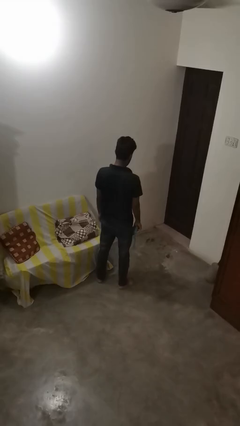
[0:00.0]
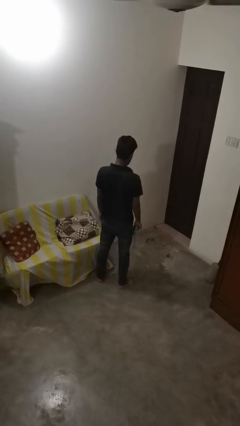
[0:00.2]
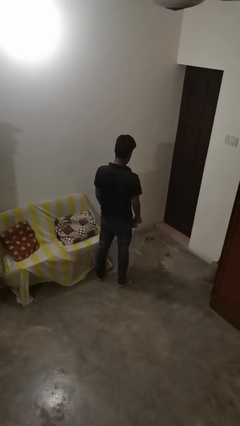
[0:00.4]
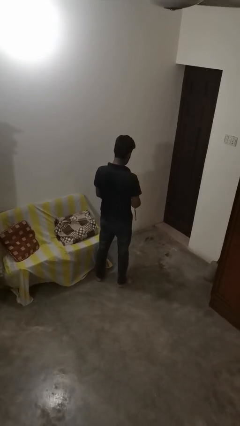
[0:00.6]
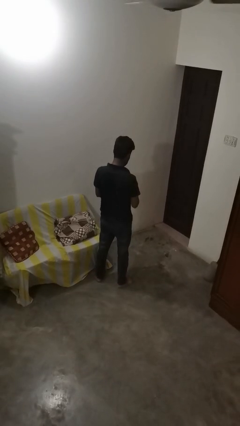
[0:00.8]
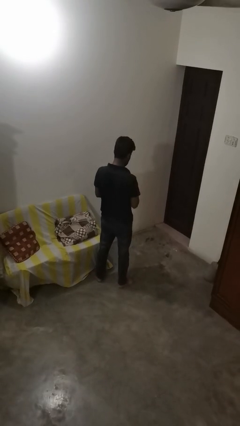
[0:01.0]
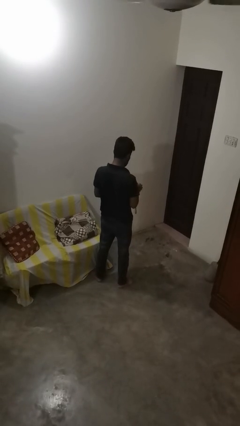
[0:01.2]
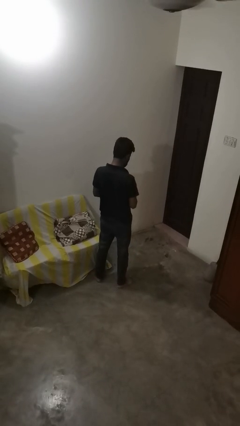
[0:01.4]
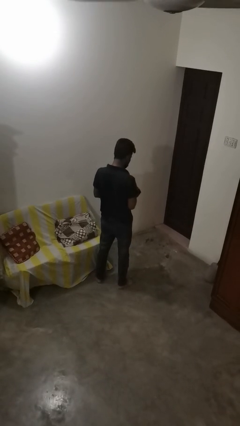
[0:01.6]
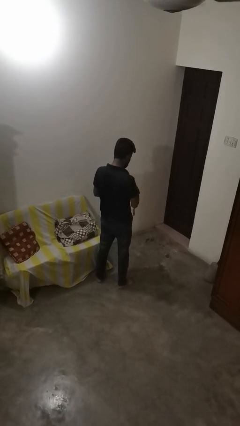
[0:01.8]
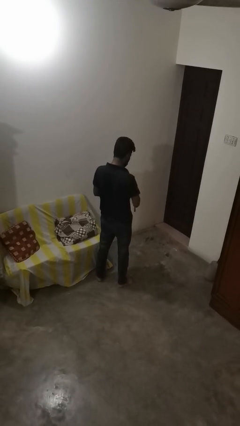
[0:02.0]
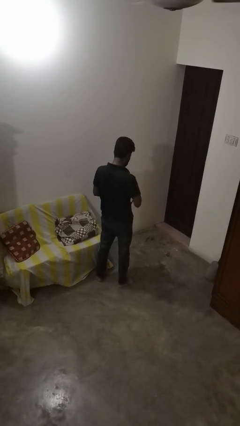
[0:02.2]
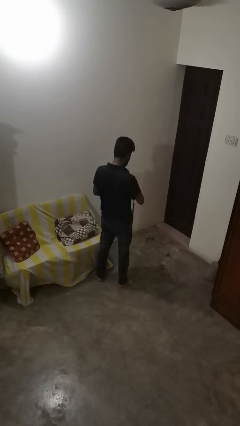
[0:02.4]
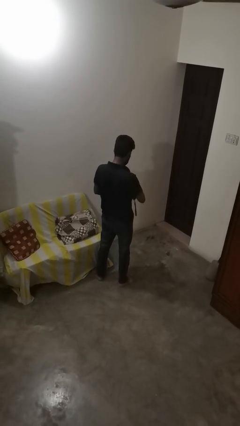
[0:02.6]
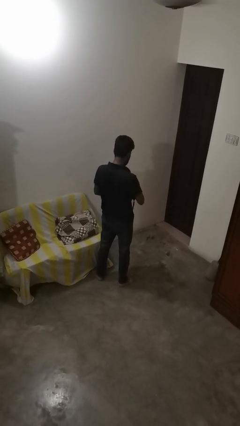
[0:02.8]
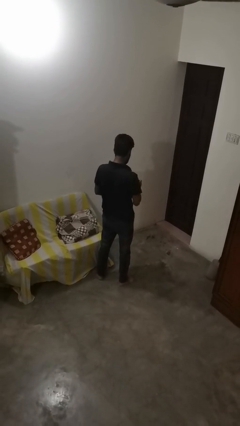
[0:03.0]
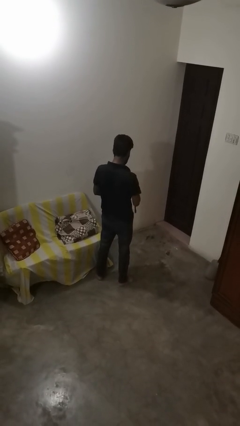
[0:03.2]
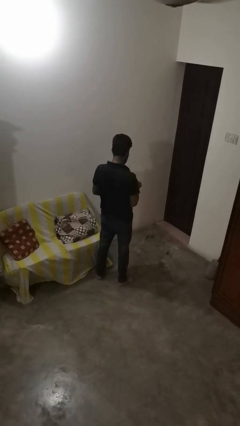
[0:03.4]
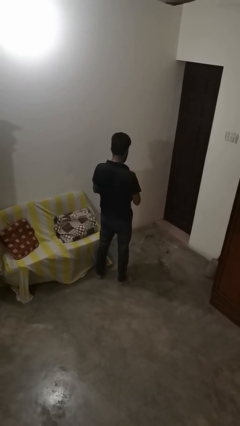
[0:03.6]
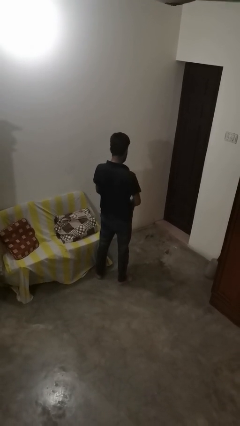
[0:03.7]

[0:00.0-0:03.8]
person searches in bag

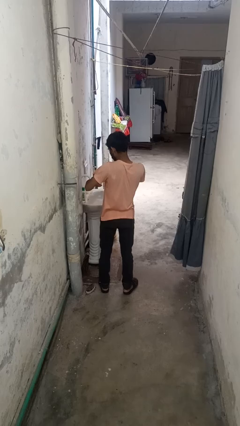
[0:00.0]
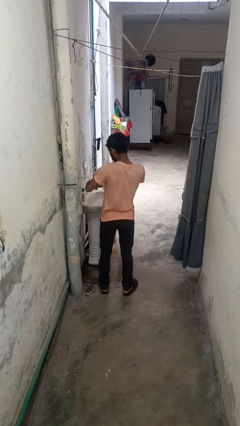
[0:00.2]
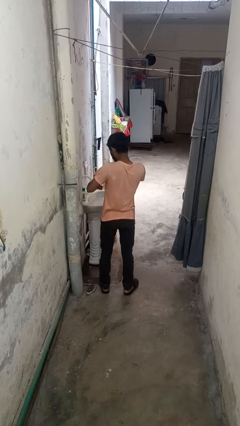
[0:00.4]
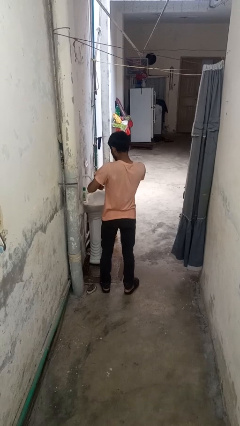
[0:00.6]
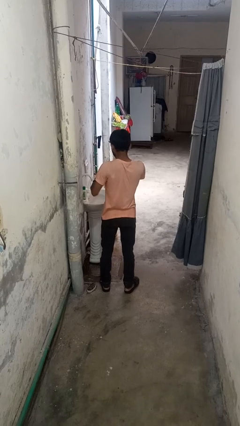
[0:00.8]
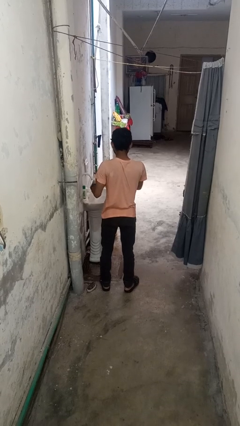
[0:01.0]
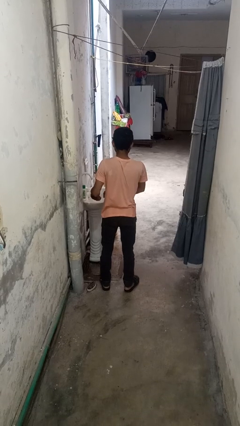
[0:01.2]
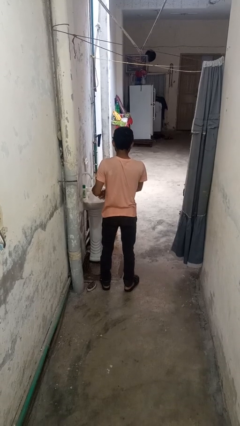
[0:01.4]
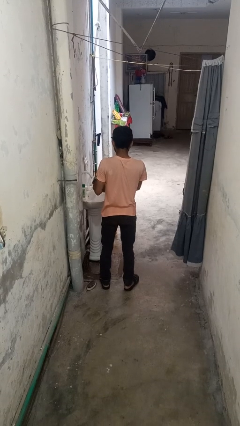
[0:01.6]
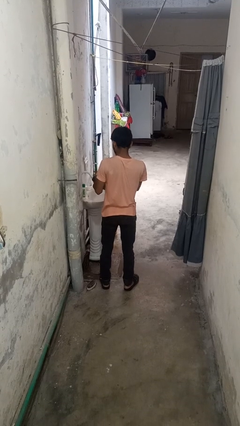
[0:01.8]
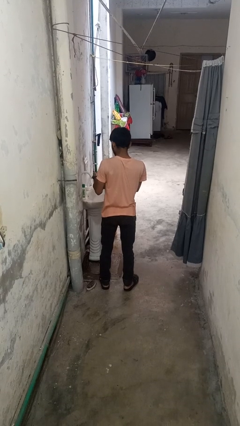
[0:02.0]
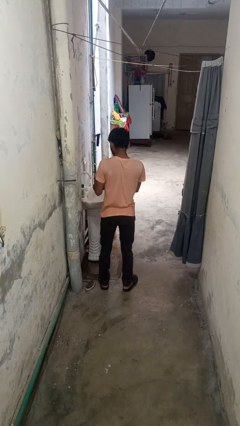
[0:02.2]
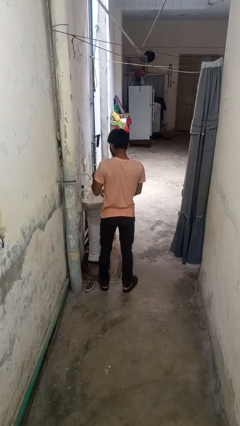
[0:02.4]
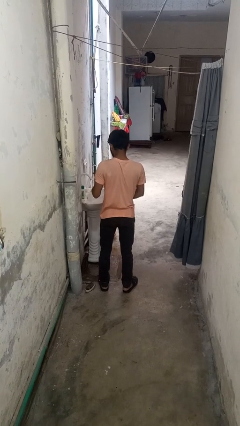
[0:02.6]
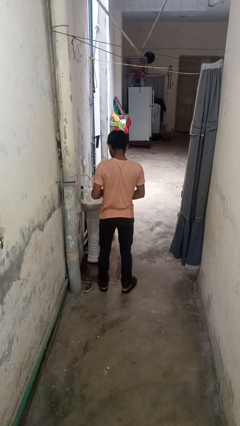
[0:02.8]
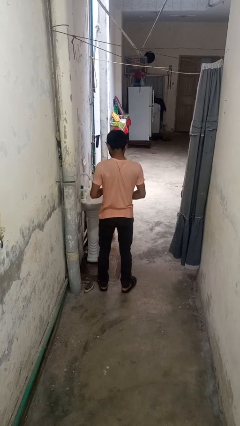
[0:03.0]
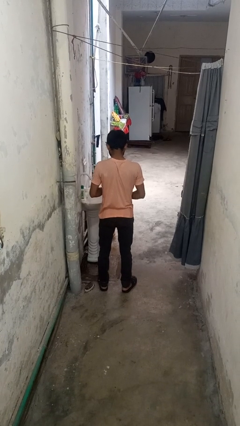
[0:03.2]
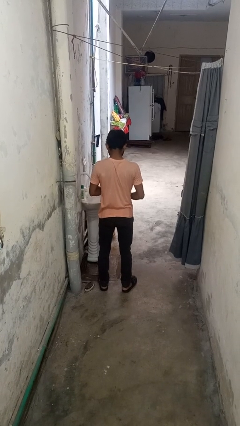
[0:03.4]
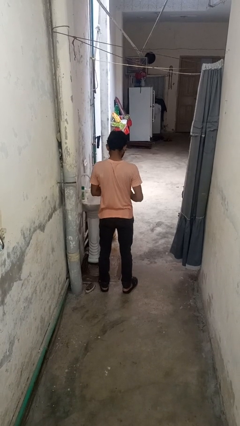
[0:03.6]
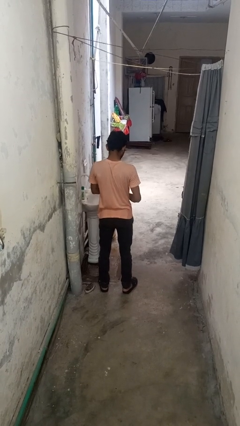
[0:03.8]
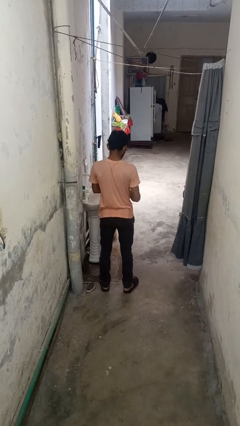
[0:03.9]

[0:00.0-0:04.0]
person takes off wristwatch

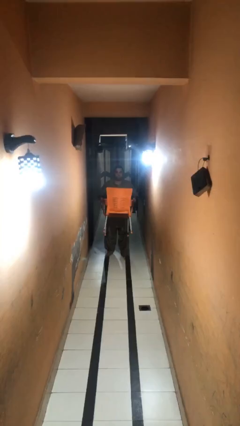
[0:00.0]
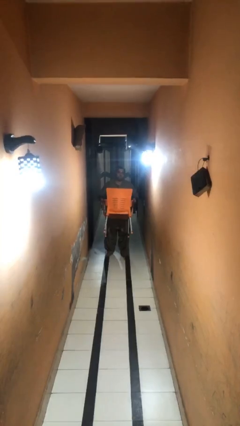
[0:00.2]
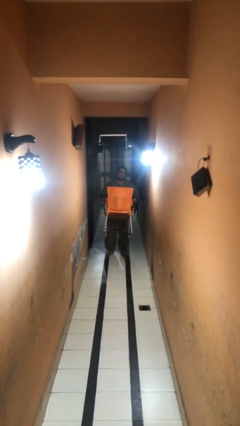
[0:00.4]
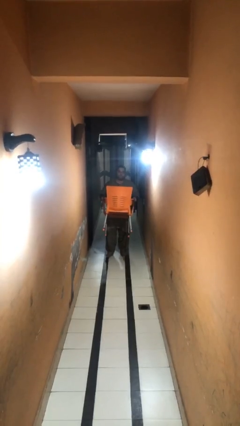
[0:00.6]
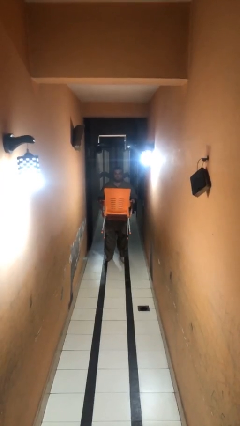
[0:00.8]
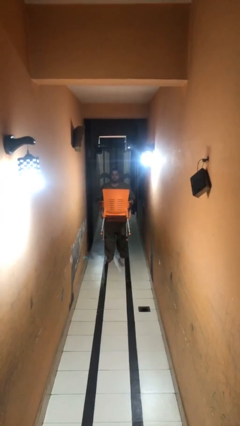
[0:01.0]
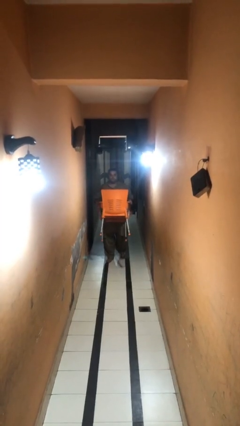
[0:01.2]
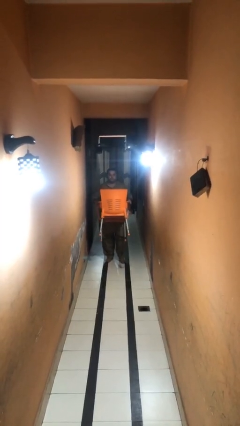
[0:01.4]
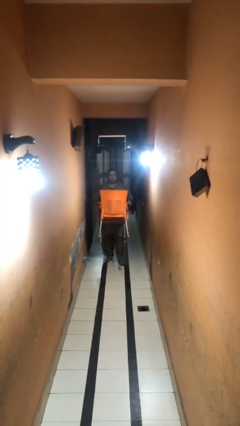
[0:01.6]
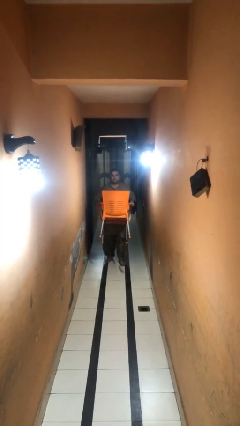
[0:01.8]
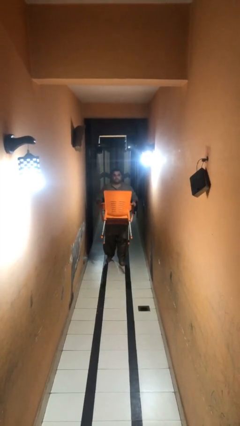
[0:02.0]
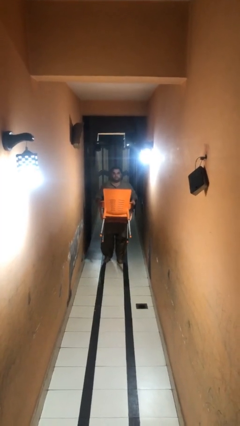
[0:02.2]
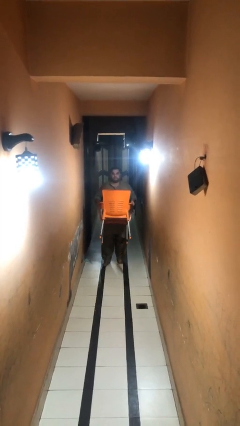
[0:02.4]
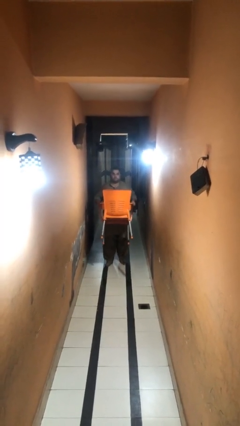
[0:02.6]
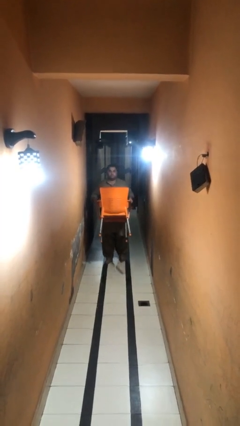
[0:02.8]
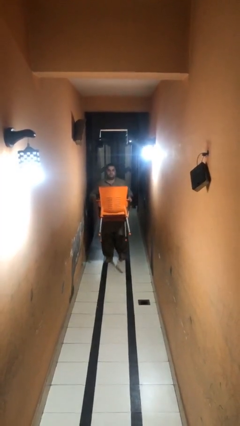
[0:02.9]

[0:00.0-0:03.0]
person carries furniture

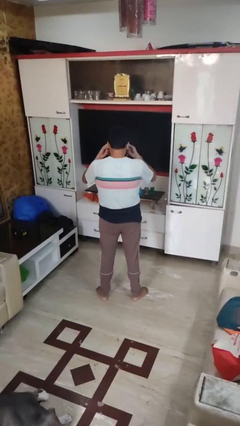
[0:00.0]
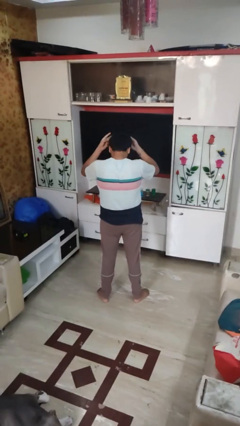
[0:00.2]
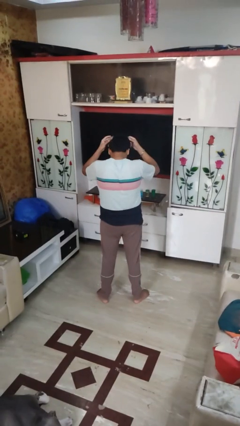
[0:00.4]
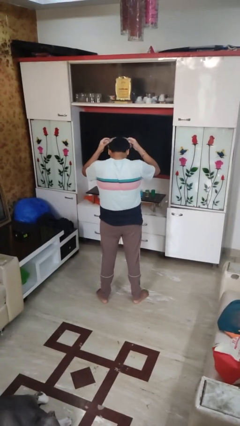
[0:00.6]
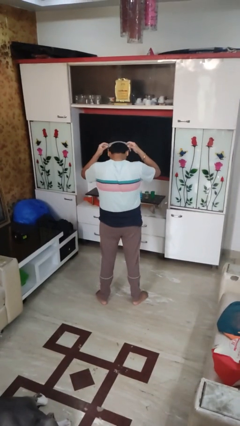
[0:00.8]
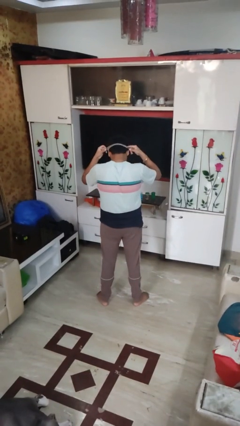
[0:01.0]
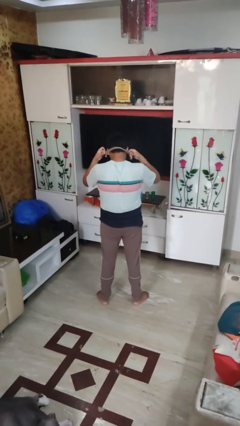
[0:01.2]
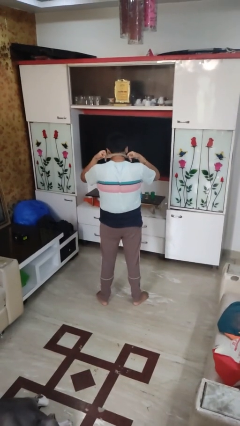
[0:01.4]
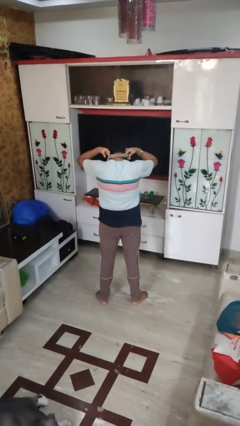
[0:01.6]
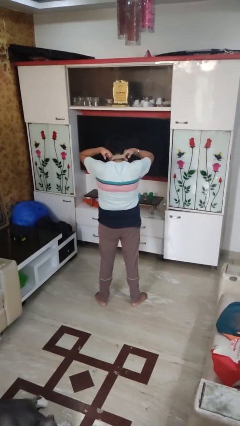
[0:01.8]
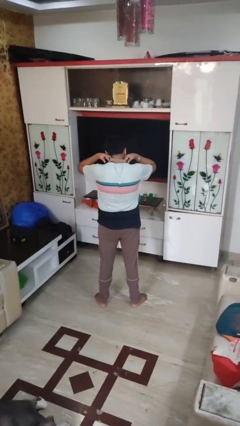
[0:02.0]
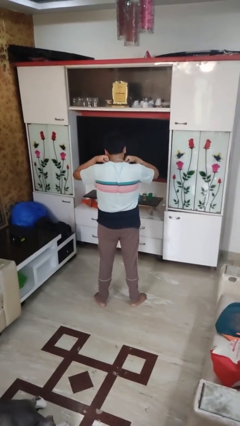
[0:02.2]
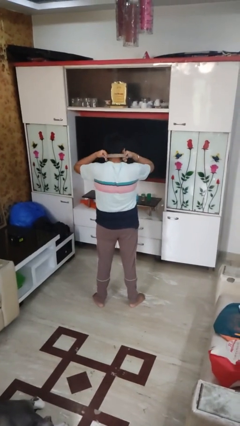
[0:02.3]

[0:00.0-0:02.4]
person puts on necktie

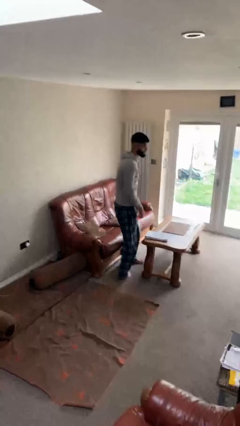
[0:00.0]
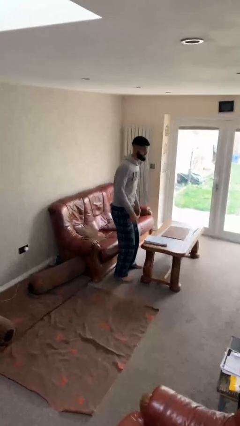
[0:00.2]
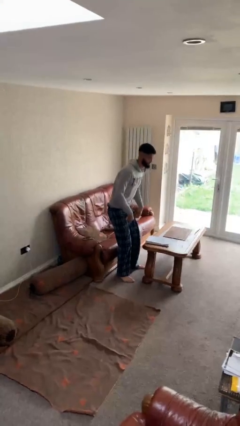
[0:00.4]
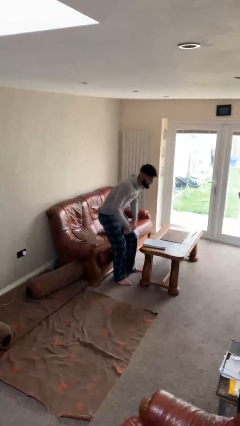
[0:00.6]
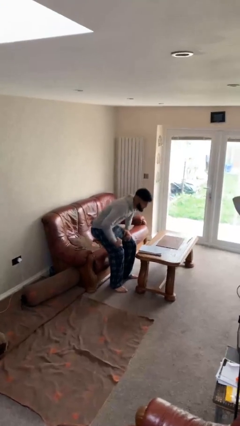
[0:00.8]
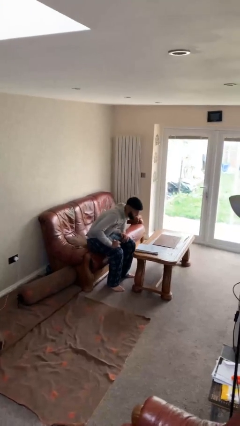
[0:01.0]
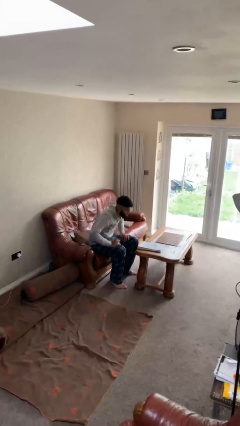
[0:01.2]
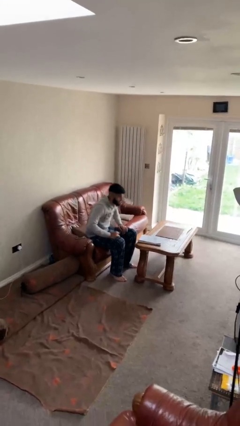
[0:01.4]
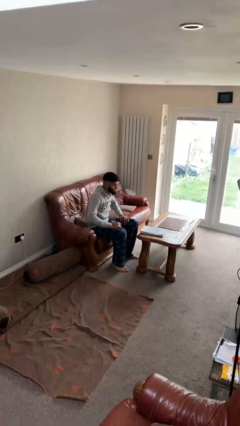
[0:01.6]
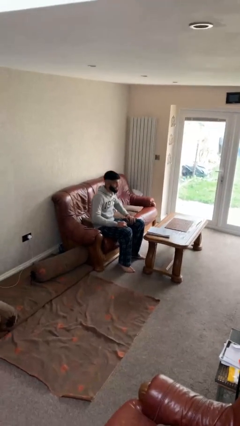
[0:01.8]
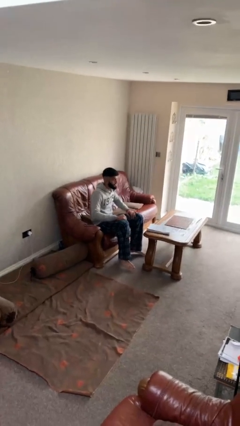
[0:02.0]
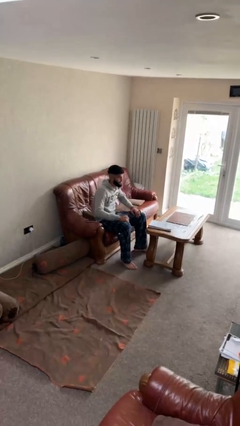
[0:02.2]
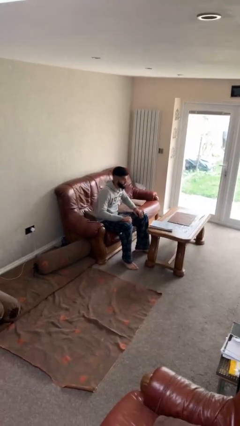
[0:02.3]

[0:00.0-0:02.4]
person sits down

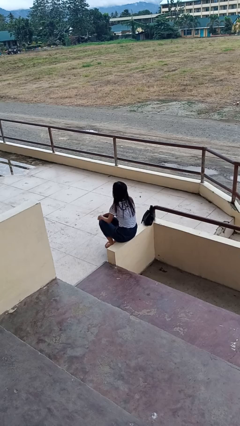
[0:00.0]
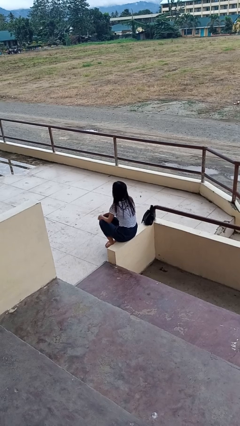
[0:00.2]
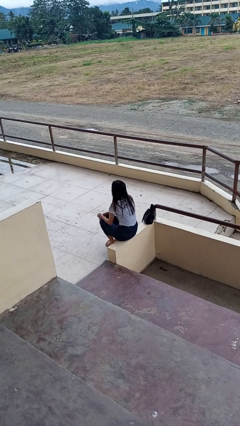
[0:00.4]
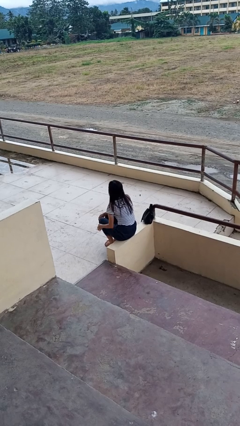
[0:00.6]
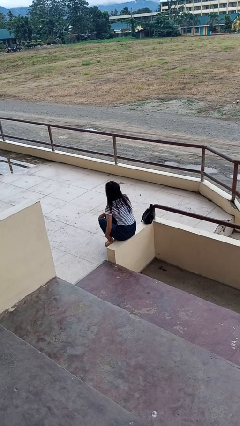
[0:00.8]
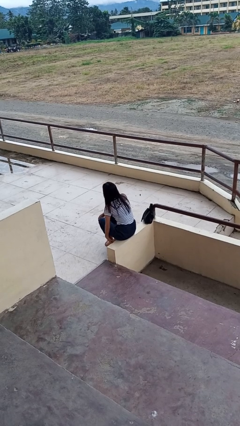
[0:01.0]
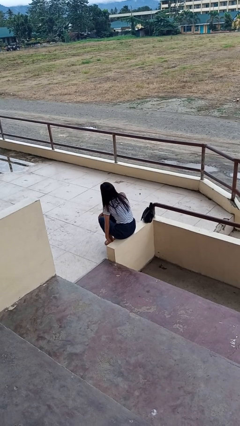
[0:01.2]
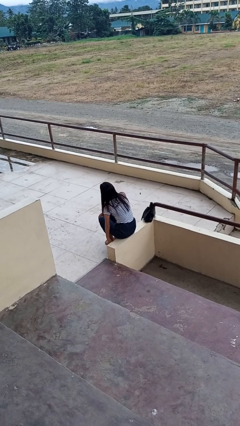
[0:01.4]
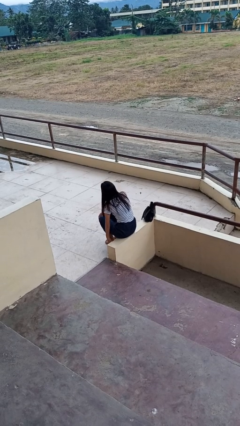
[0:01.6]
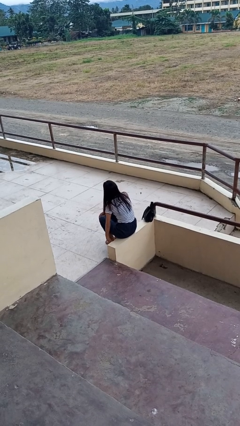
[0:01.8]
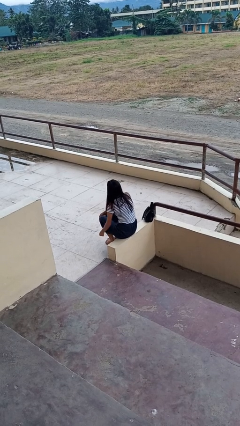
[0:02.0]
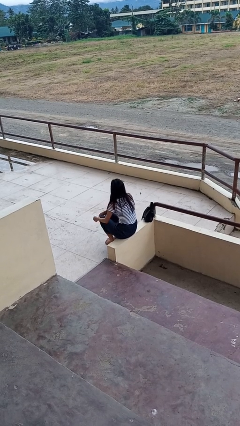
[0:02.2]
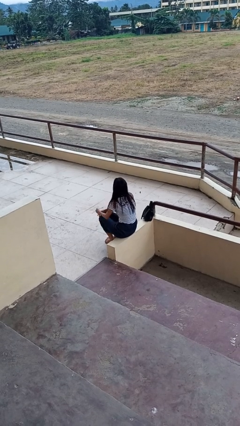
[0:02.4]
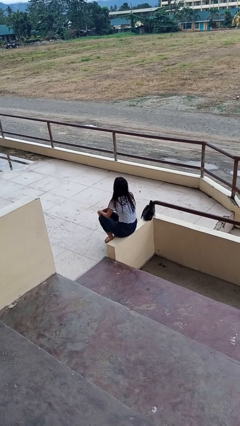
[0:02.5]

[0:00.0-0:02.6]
person rubs foot
